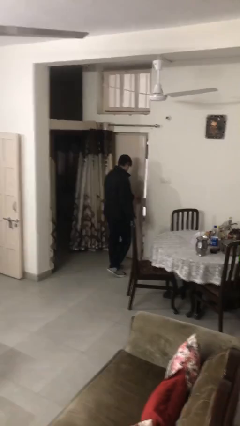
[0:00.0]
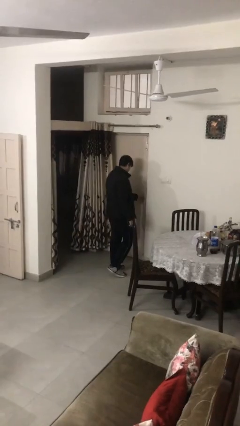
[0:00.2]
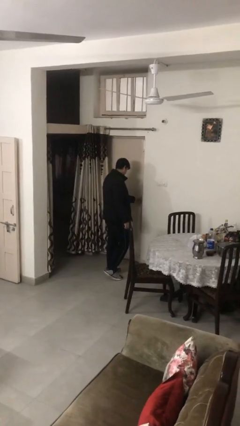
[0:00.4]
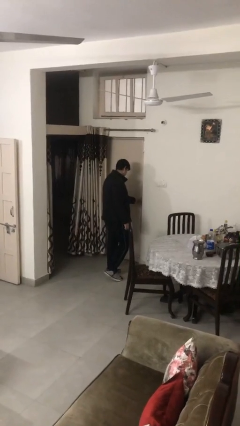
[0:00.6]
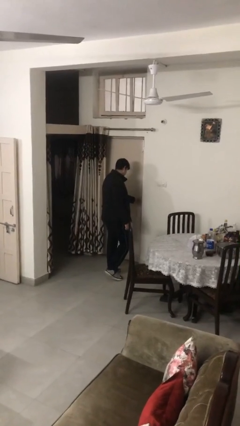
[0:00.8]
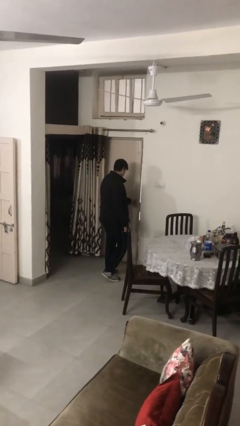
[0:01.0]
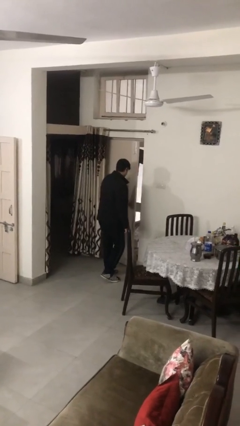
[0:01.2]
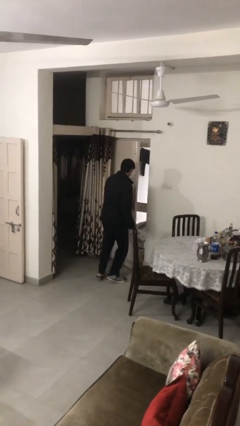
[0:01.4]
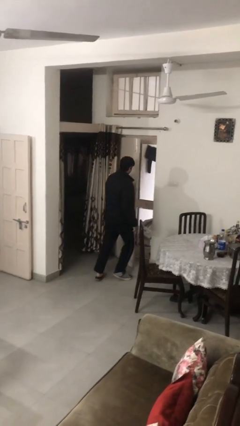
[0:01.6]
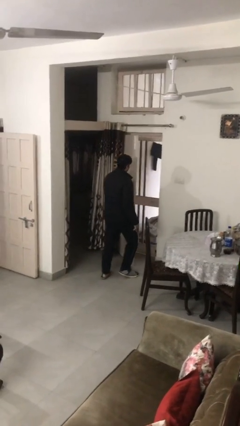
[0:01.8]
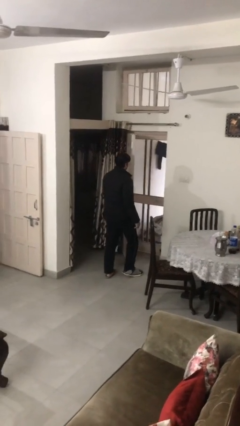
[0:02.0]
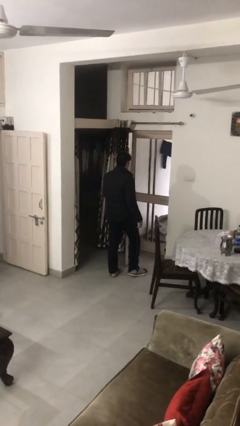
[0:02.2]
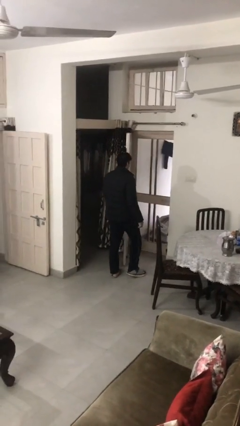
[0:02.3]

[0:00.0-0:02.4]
person opens facility door

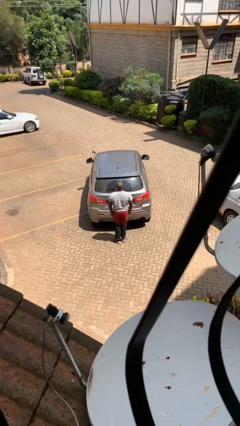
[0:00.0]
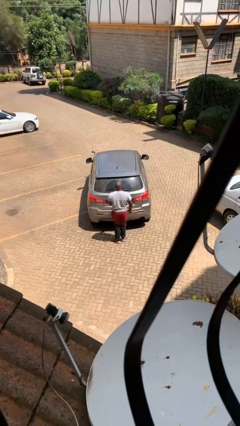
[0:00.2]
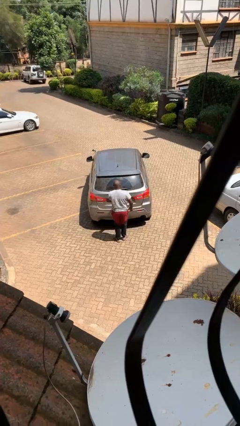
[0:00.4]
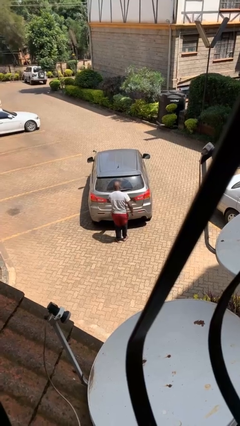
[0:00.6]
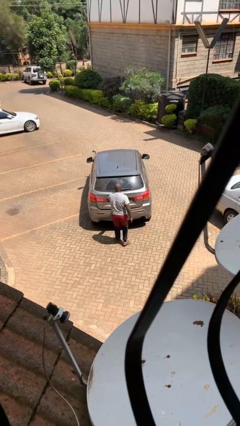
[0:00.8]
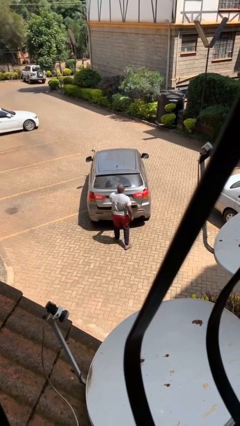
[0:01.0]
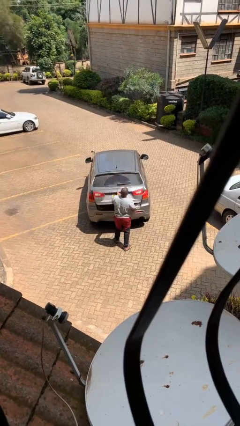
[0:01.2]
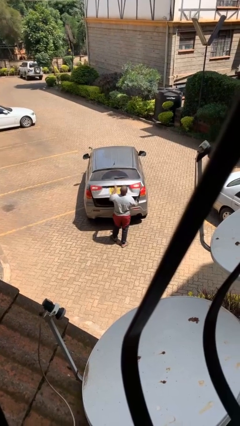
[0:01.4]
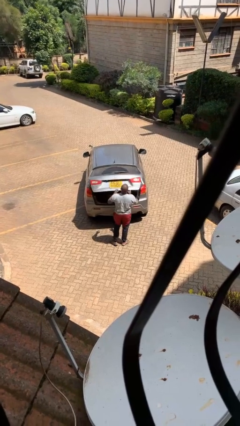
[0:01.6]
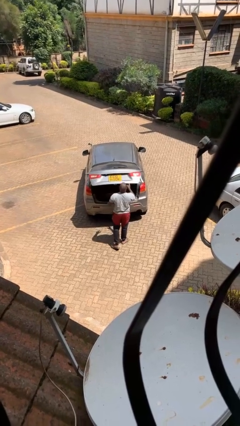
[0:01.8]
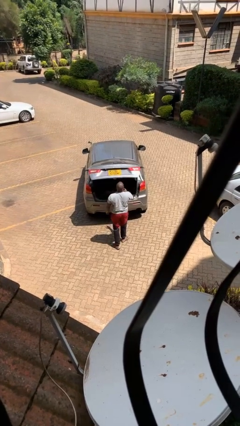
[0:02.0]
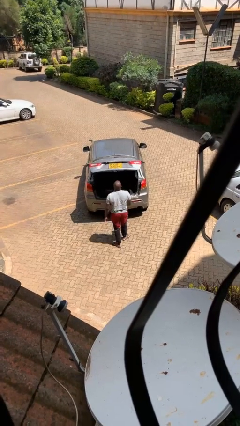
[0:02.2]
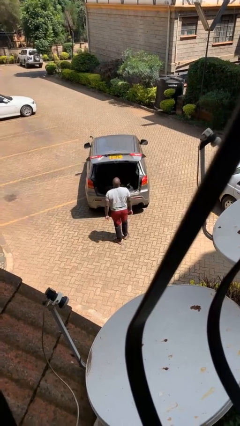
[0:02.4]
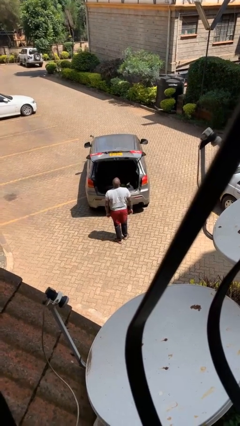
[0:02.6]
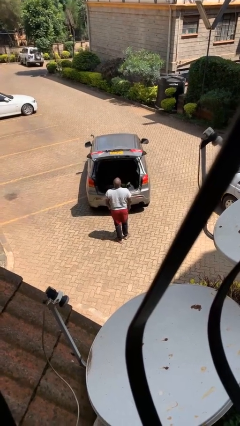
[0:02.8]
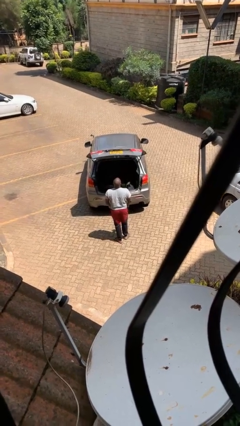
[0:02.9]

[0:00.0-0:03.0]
person opens car trunk

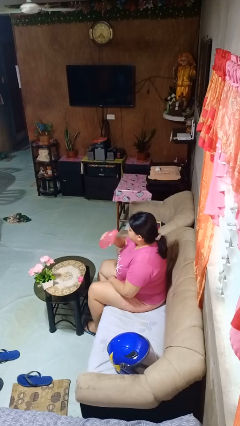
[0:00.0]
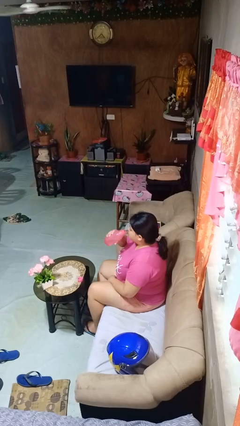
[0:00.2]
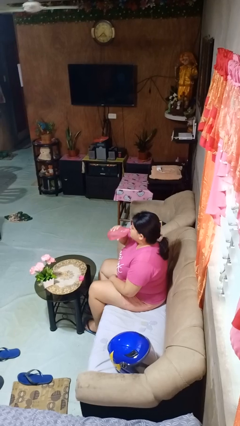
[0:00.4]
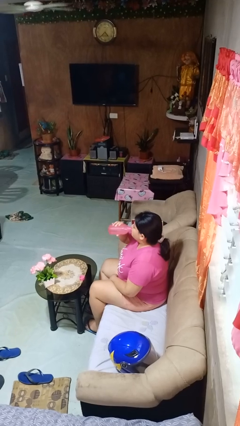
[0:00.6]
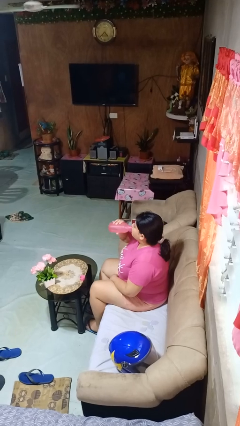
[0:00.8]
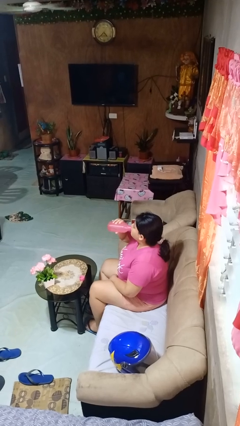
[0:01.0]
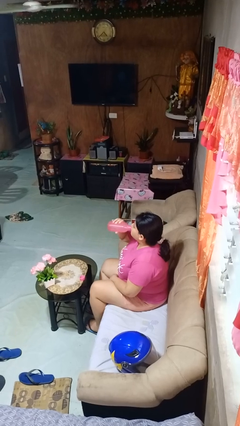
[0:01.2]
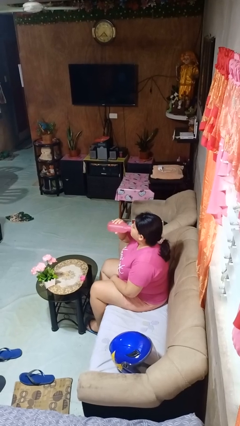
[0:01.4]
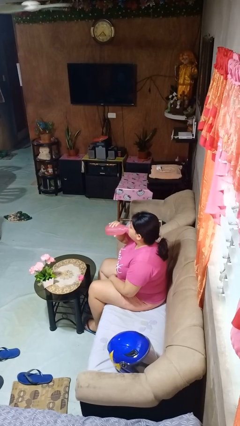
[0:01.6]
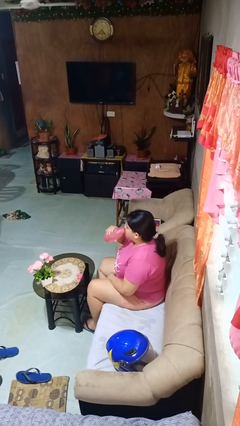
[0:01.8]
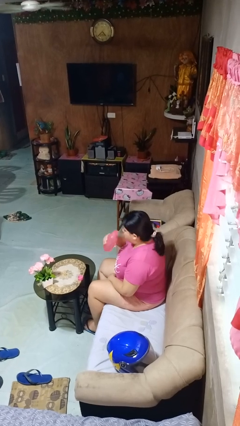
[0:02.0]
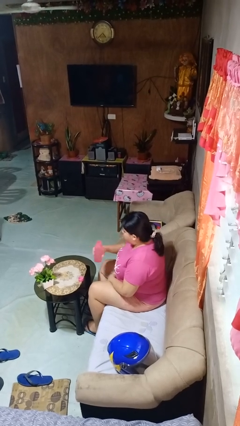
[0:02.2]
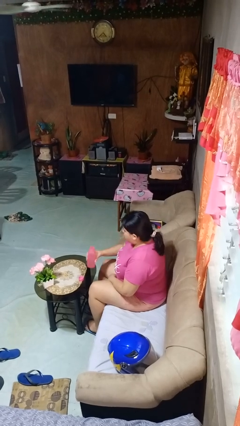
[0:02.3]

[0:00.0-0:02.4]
person drinks from bottle

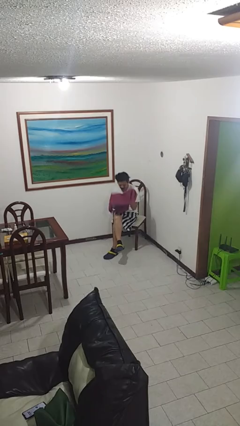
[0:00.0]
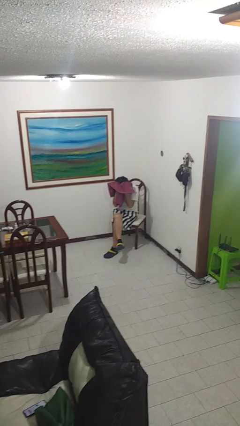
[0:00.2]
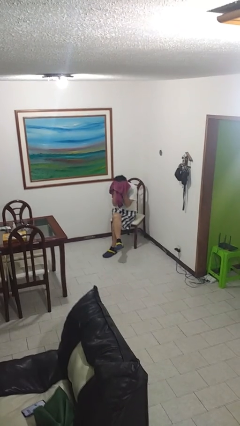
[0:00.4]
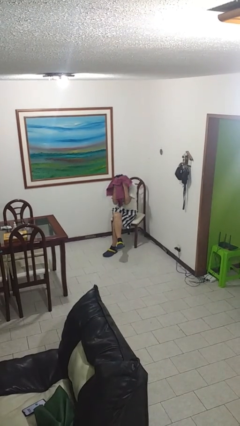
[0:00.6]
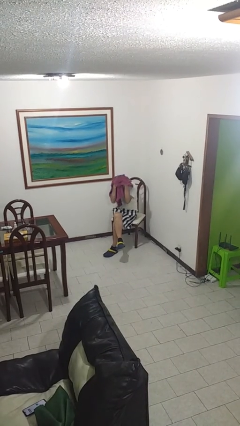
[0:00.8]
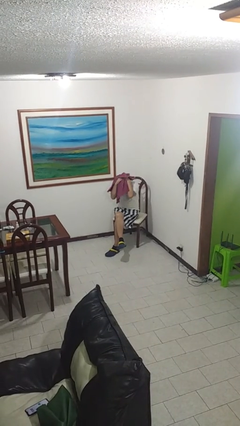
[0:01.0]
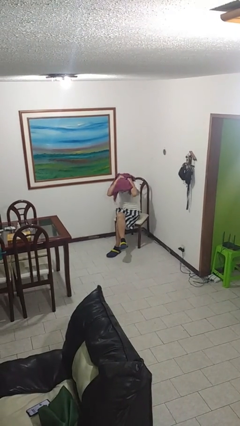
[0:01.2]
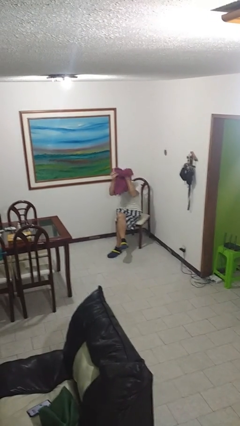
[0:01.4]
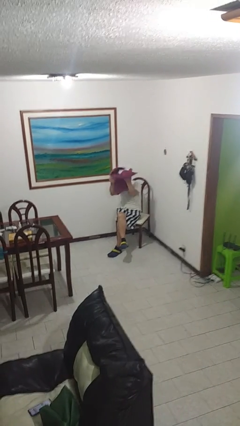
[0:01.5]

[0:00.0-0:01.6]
person dries hair with towel

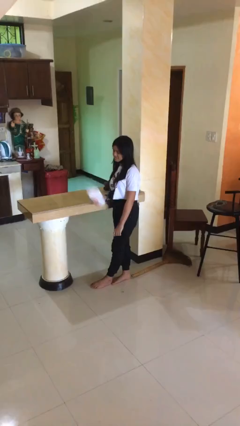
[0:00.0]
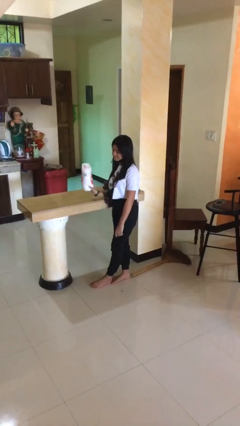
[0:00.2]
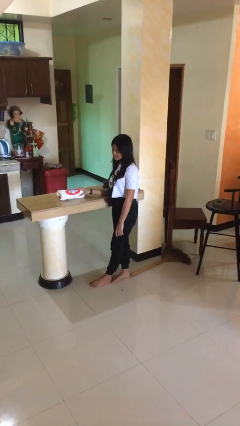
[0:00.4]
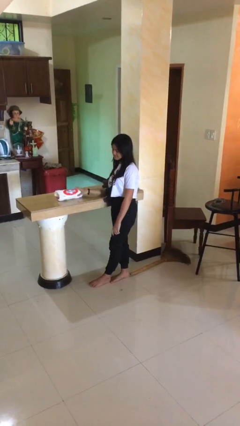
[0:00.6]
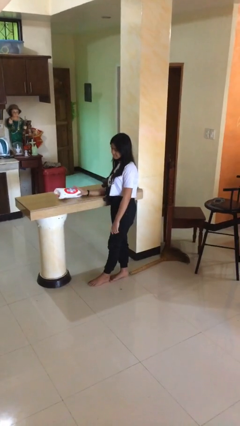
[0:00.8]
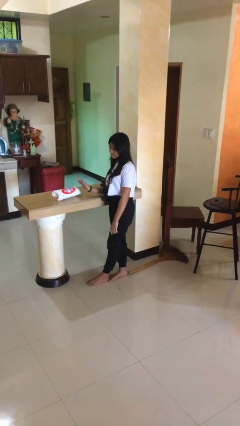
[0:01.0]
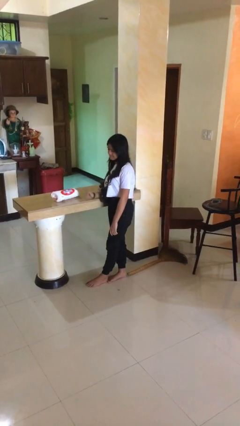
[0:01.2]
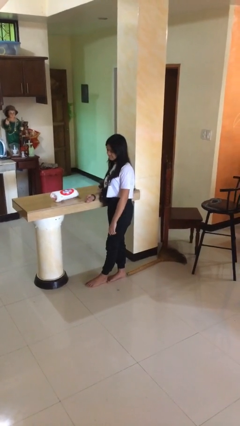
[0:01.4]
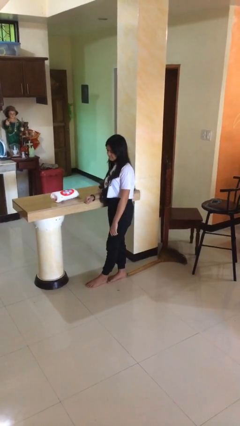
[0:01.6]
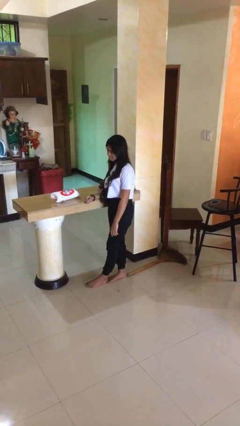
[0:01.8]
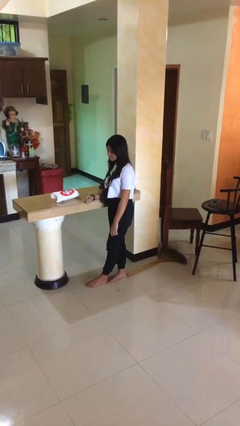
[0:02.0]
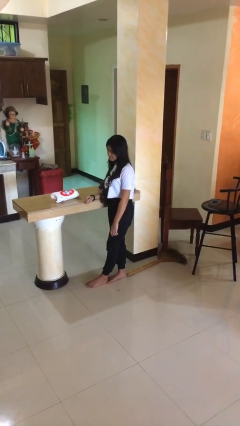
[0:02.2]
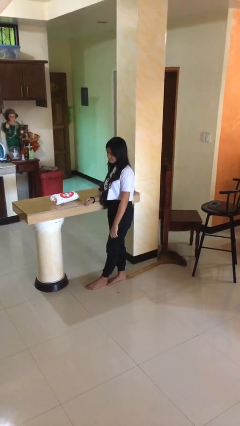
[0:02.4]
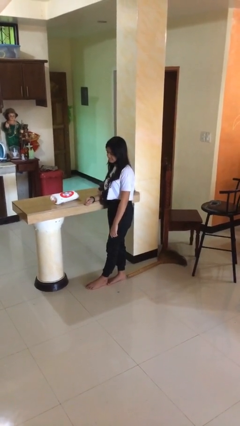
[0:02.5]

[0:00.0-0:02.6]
person puts down object on countertop

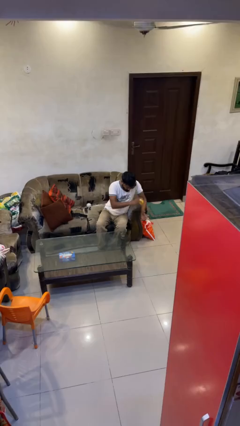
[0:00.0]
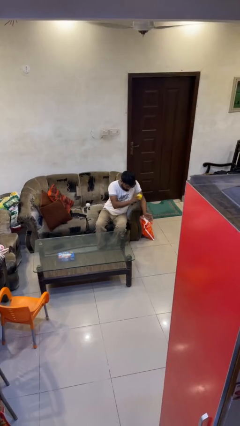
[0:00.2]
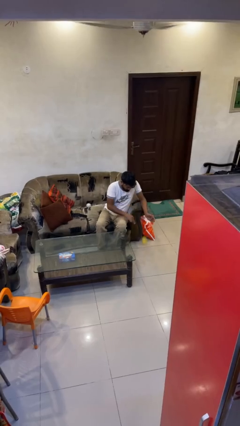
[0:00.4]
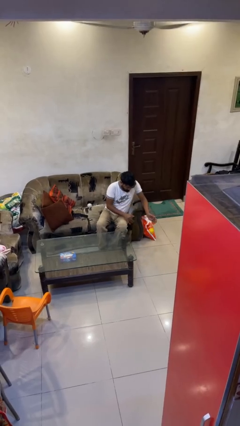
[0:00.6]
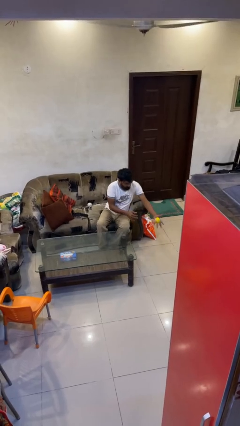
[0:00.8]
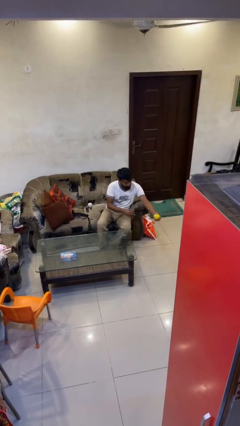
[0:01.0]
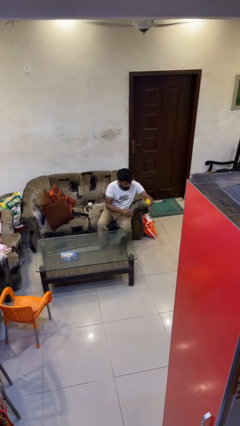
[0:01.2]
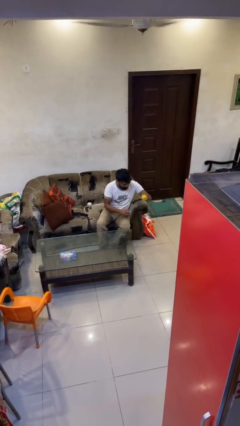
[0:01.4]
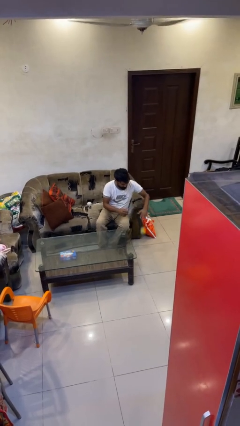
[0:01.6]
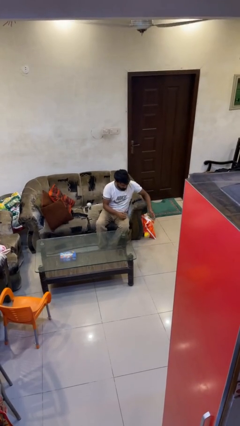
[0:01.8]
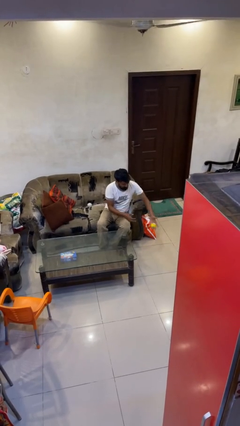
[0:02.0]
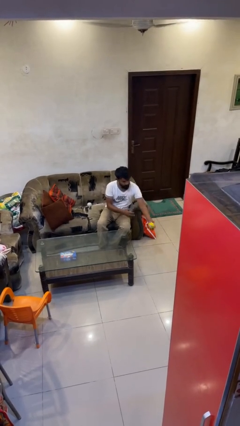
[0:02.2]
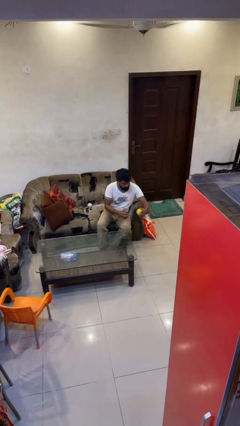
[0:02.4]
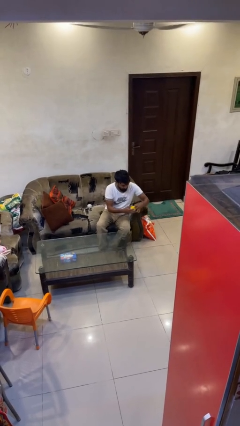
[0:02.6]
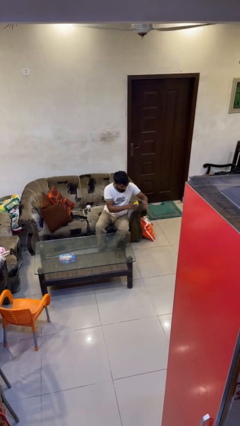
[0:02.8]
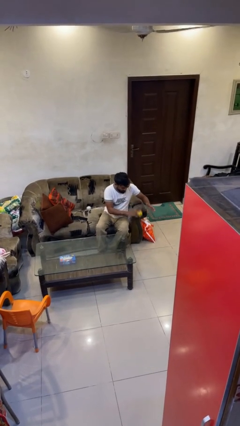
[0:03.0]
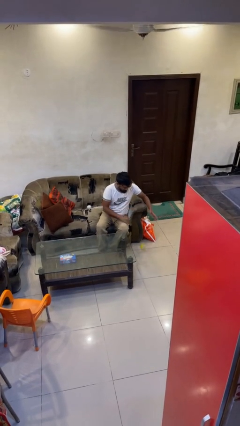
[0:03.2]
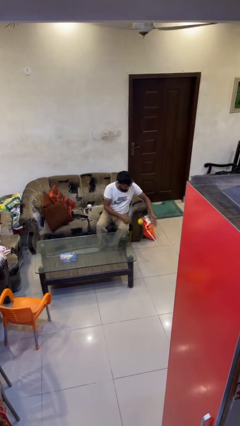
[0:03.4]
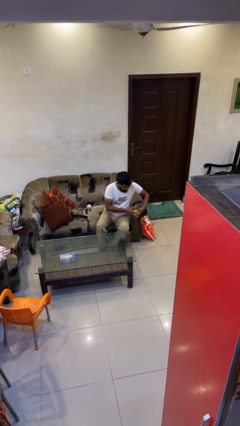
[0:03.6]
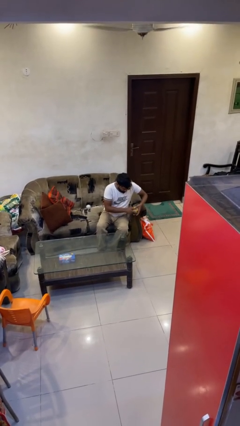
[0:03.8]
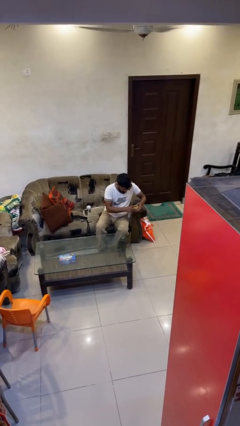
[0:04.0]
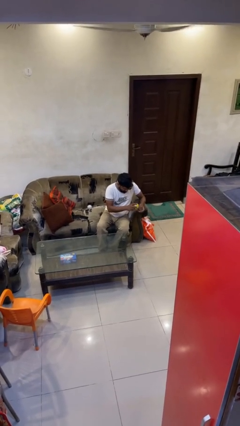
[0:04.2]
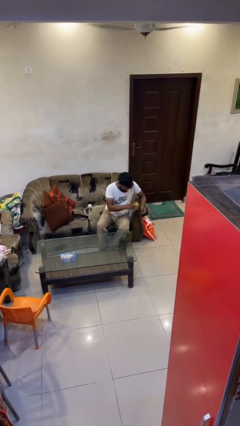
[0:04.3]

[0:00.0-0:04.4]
person bounces ball on floor

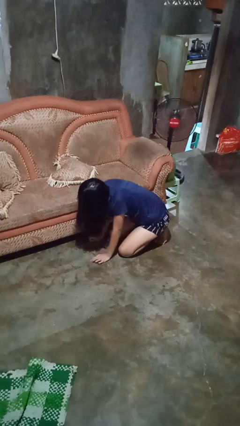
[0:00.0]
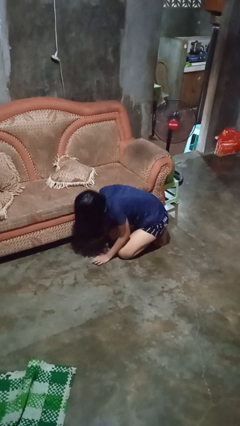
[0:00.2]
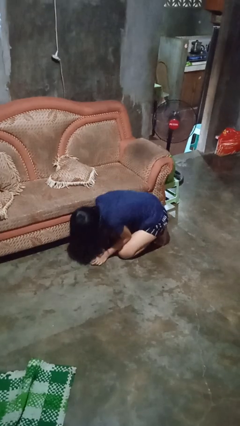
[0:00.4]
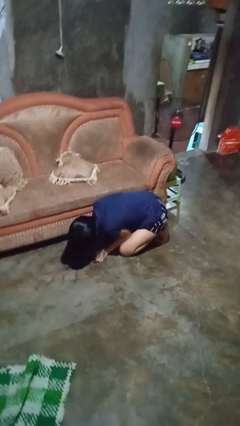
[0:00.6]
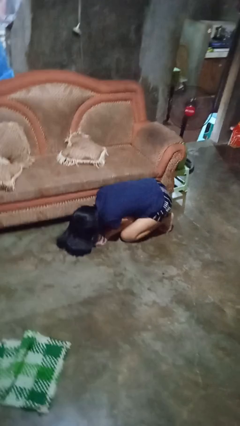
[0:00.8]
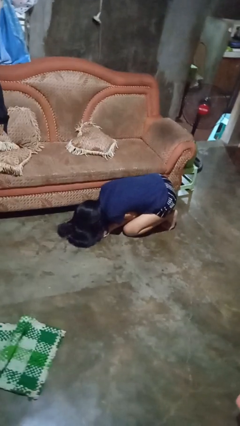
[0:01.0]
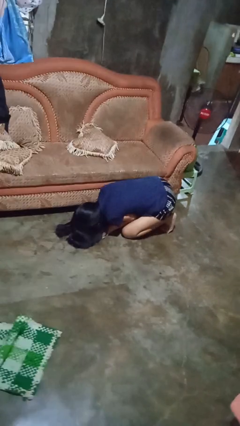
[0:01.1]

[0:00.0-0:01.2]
person searches under couch
